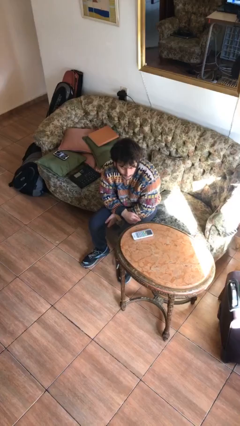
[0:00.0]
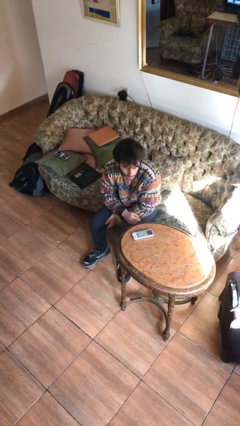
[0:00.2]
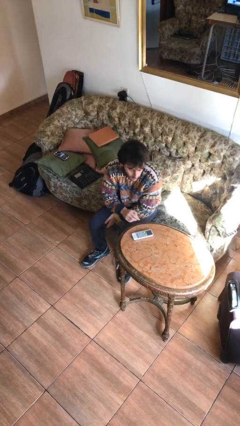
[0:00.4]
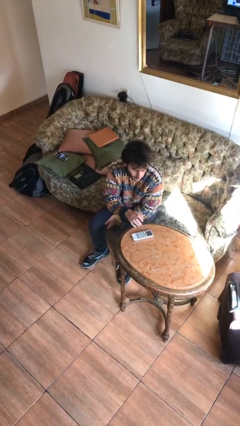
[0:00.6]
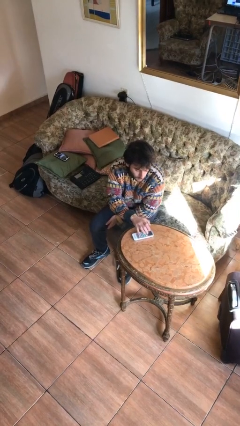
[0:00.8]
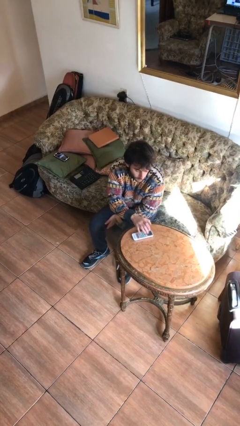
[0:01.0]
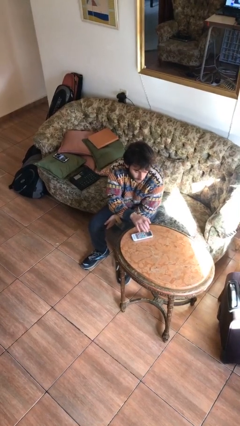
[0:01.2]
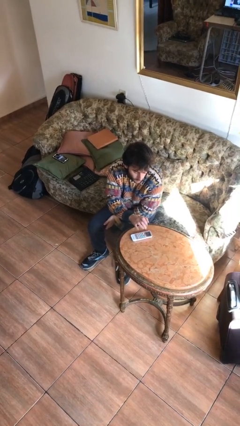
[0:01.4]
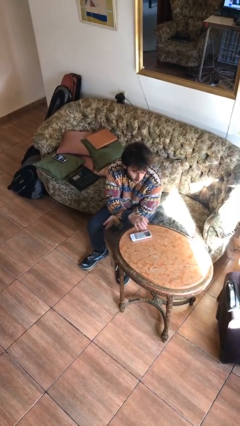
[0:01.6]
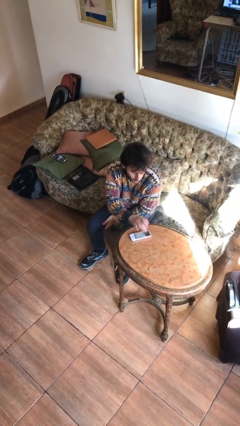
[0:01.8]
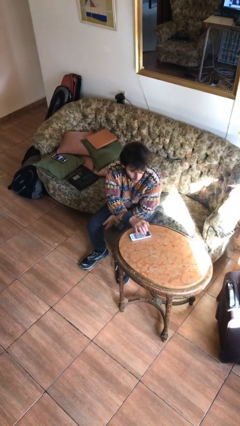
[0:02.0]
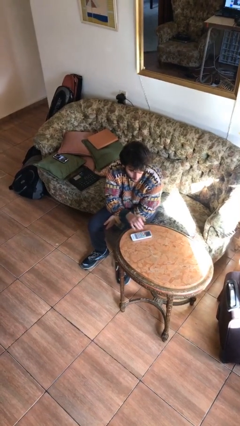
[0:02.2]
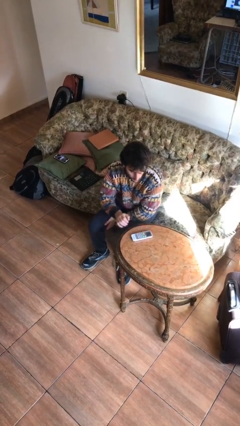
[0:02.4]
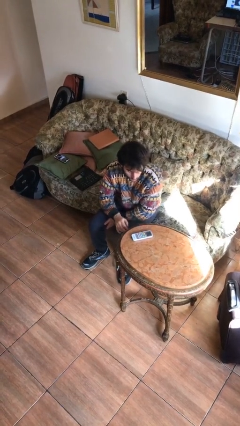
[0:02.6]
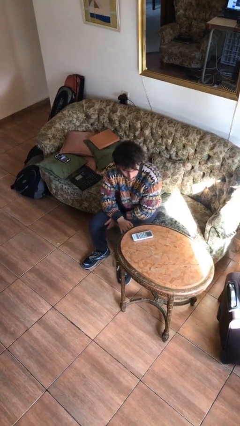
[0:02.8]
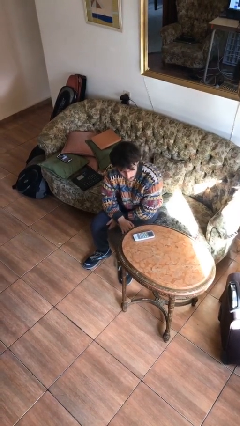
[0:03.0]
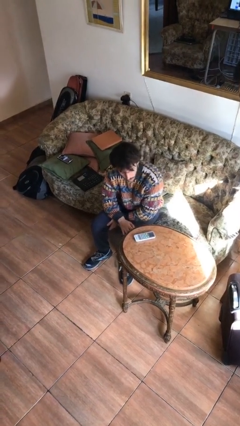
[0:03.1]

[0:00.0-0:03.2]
person taps object with finger

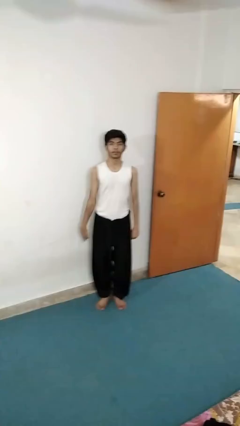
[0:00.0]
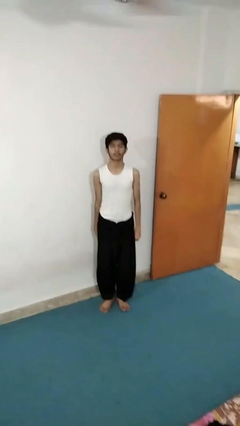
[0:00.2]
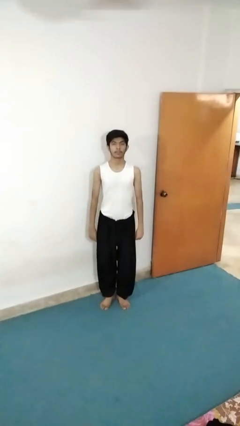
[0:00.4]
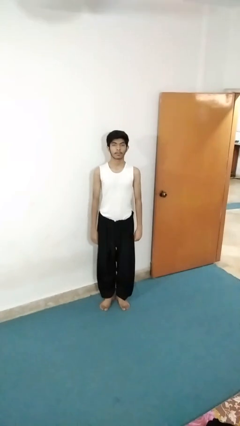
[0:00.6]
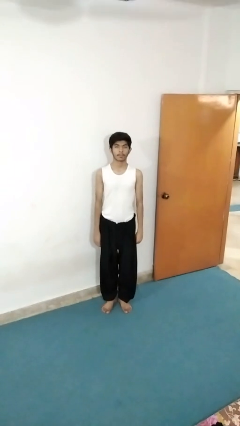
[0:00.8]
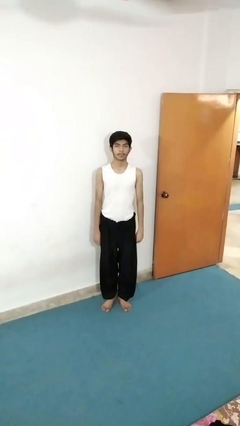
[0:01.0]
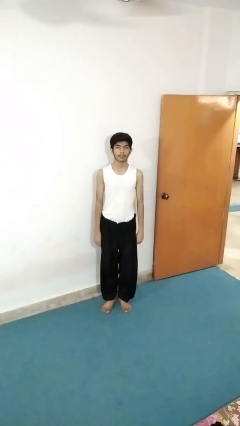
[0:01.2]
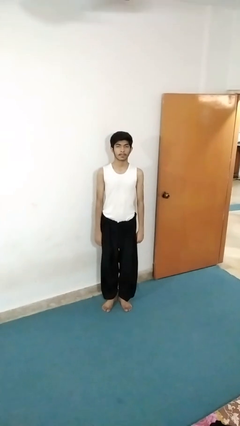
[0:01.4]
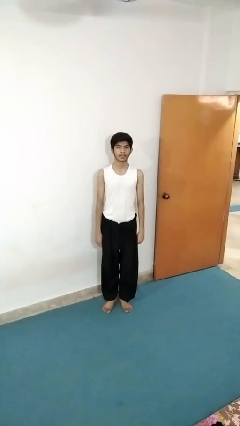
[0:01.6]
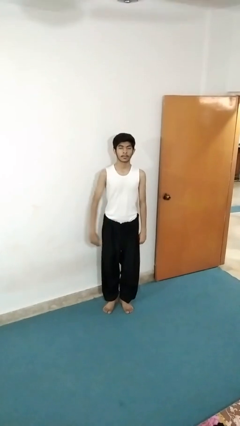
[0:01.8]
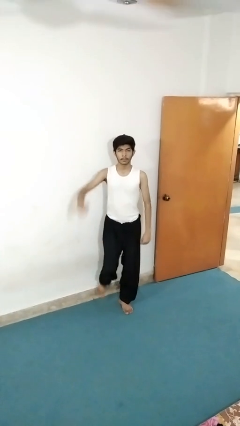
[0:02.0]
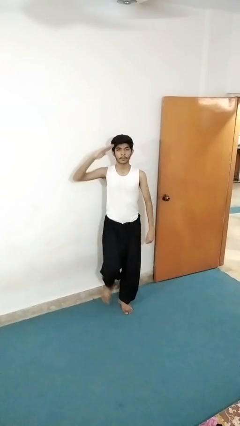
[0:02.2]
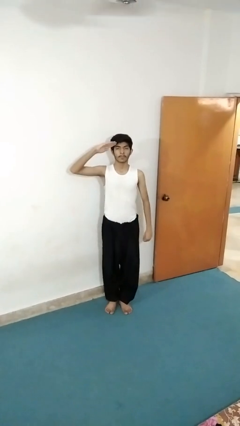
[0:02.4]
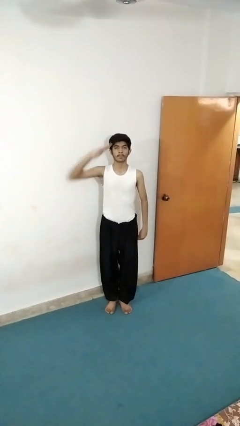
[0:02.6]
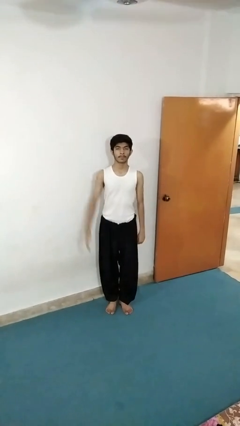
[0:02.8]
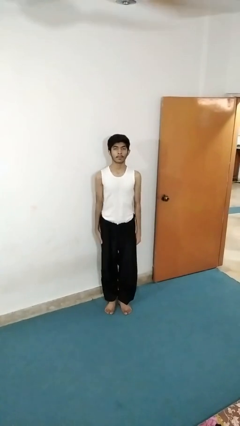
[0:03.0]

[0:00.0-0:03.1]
person salutes

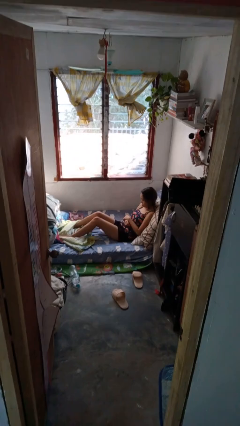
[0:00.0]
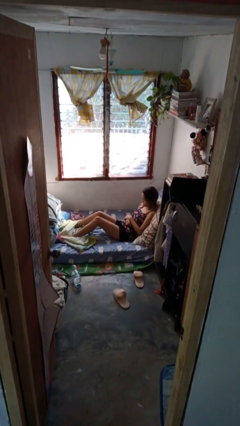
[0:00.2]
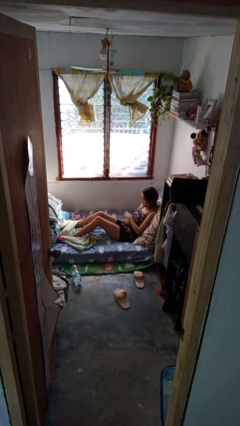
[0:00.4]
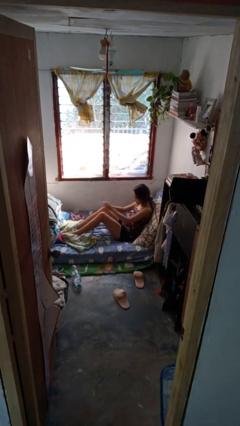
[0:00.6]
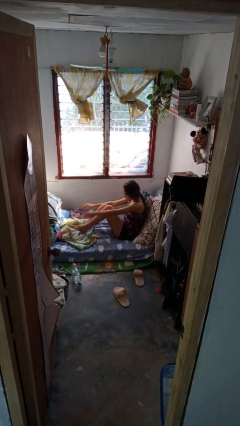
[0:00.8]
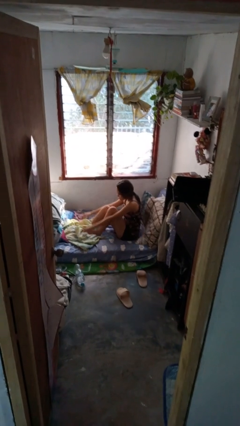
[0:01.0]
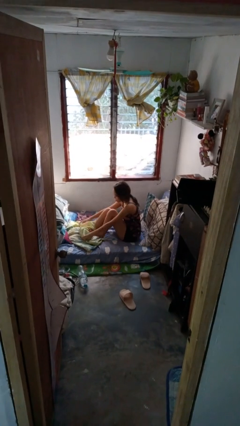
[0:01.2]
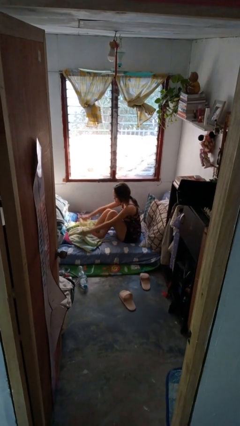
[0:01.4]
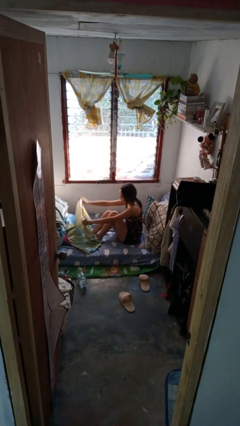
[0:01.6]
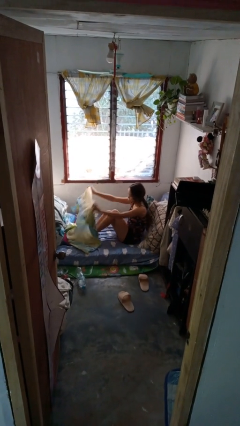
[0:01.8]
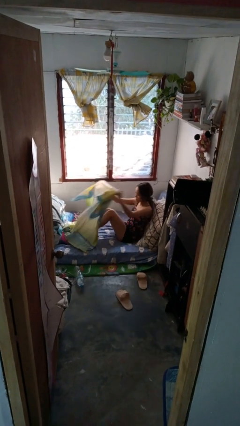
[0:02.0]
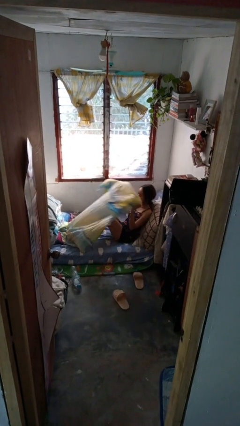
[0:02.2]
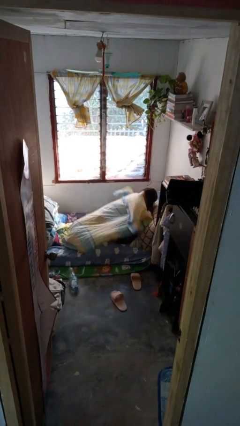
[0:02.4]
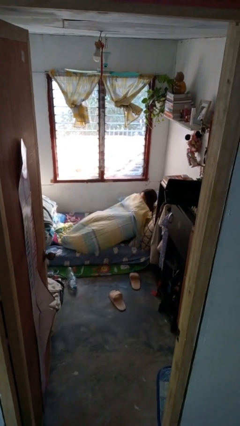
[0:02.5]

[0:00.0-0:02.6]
person covers with bedsheets

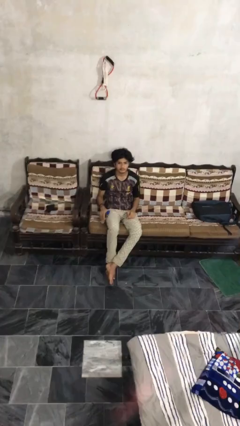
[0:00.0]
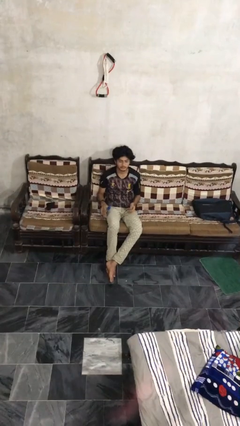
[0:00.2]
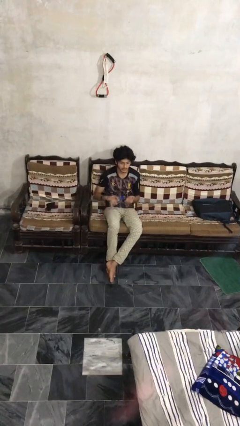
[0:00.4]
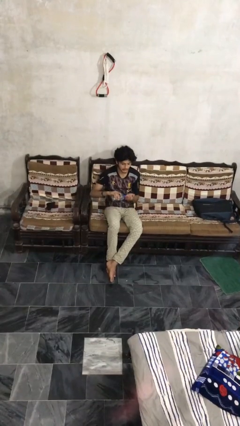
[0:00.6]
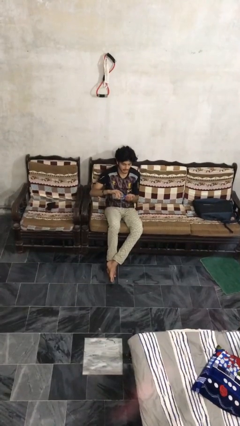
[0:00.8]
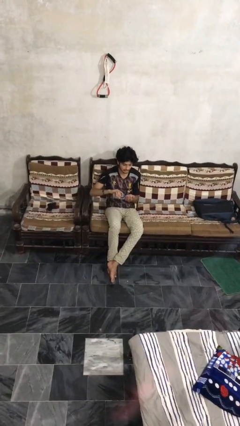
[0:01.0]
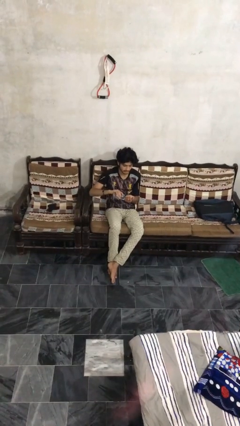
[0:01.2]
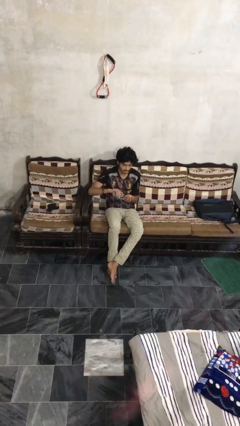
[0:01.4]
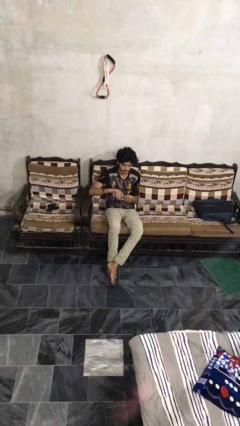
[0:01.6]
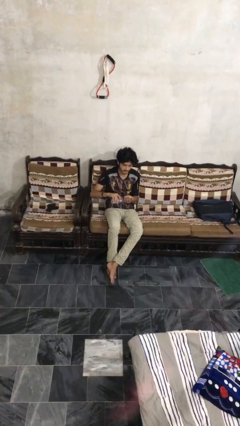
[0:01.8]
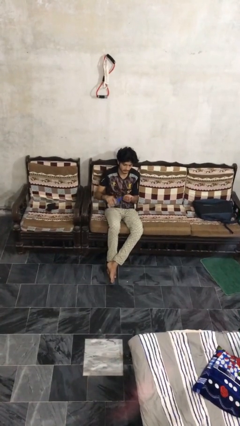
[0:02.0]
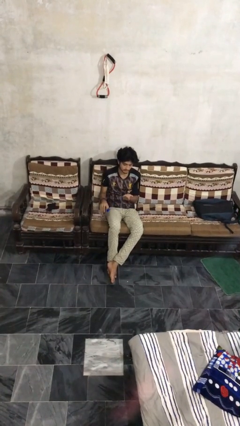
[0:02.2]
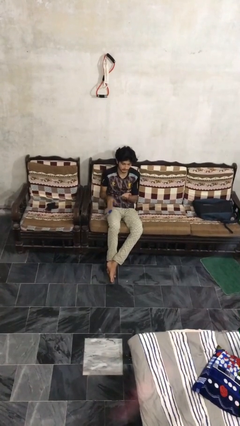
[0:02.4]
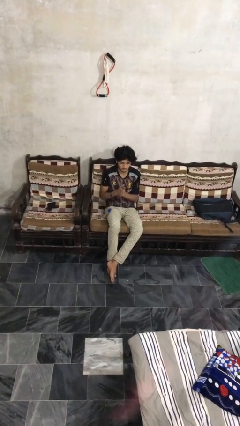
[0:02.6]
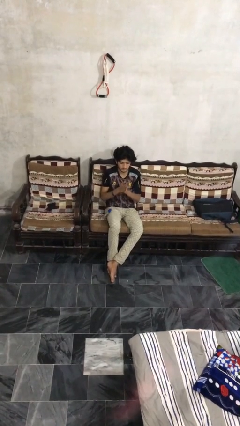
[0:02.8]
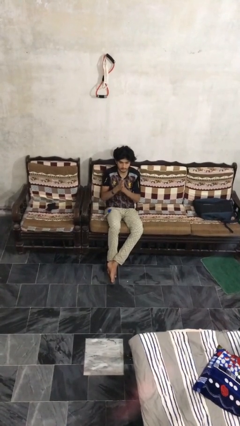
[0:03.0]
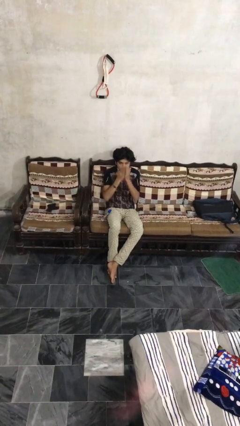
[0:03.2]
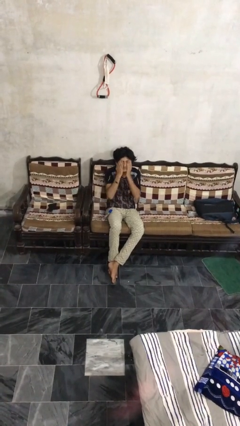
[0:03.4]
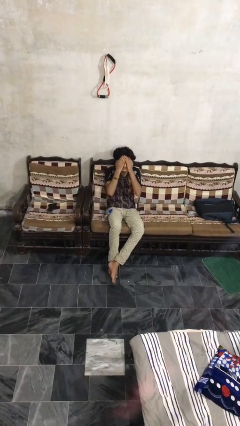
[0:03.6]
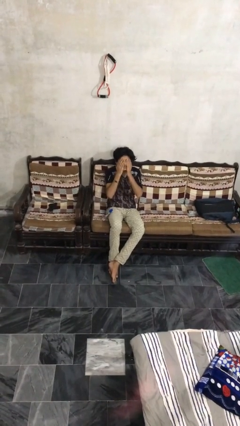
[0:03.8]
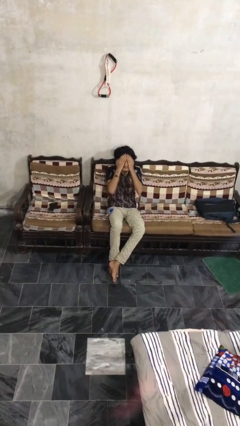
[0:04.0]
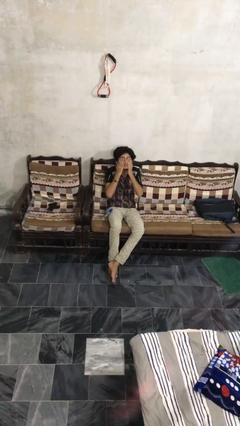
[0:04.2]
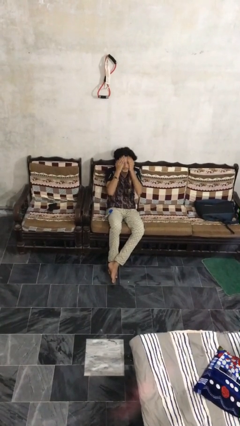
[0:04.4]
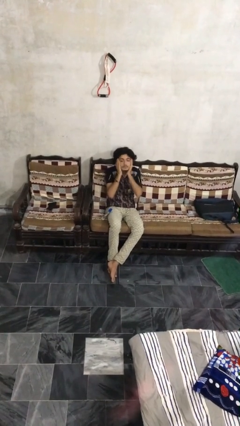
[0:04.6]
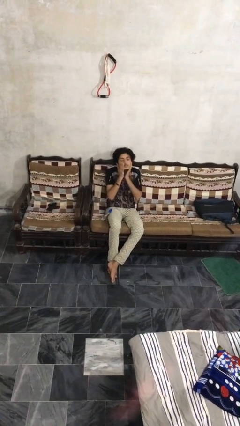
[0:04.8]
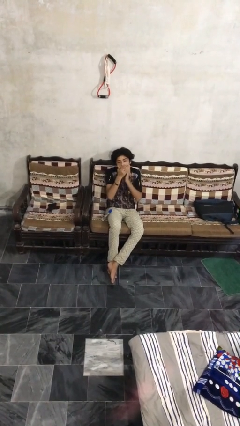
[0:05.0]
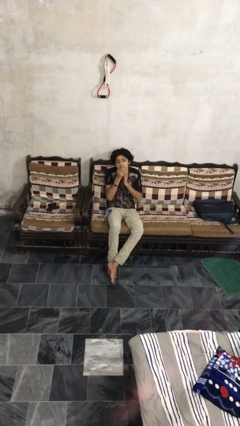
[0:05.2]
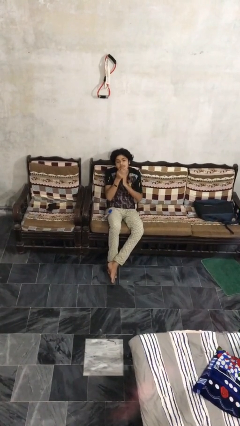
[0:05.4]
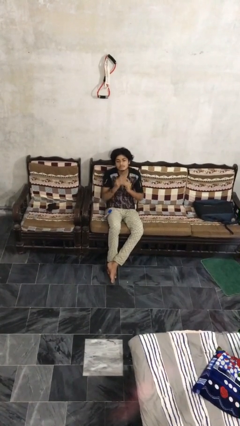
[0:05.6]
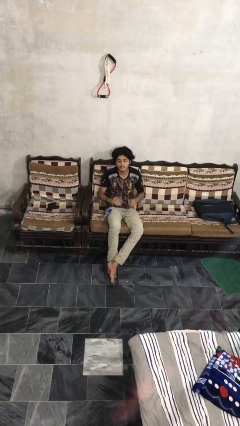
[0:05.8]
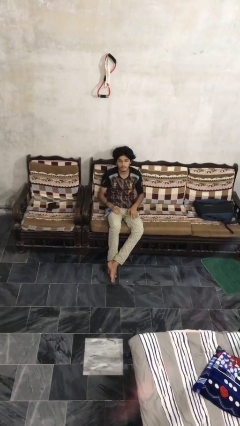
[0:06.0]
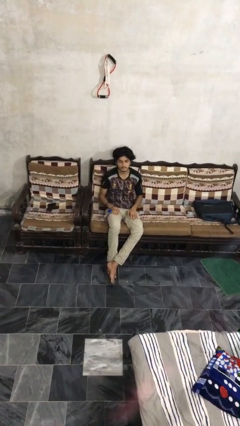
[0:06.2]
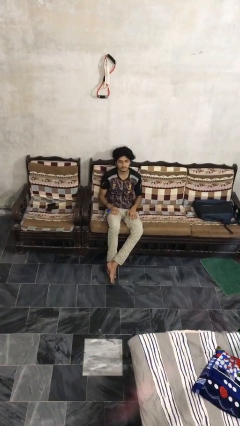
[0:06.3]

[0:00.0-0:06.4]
person applies facial moisturizer

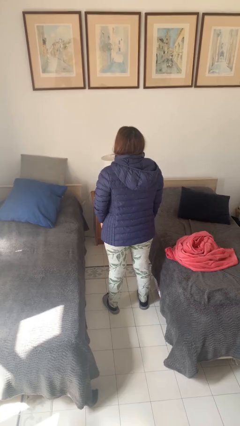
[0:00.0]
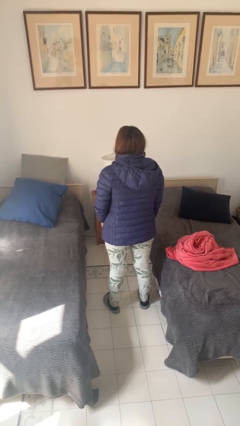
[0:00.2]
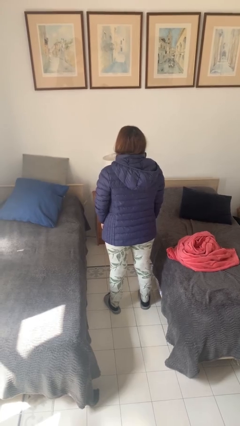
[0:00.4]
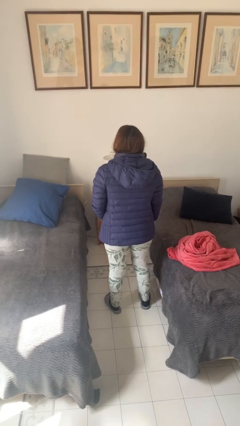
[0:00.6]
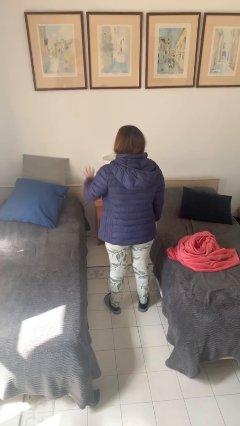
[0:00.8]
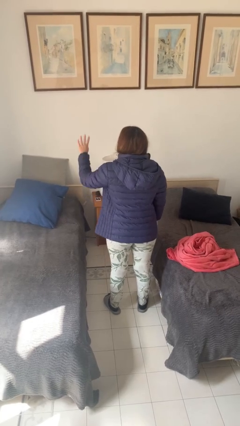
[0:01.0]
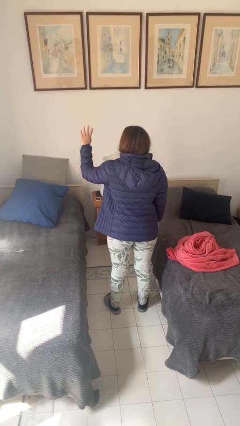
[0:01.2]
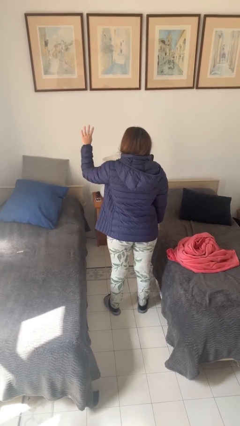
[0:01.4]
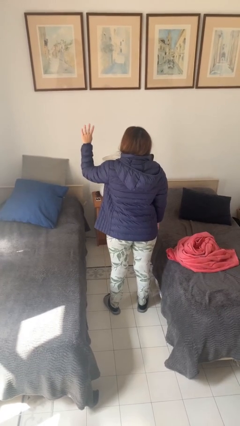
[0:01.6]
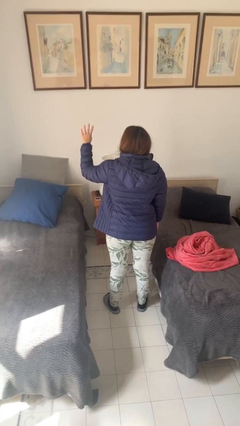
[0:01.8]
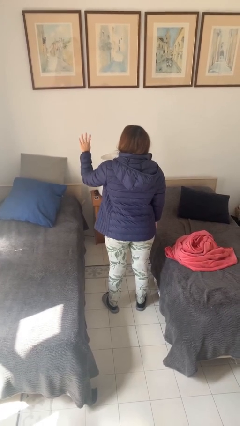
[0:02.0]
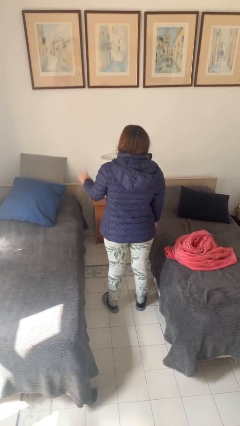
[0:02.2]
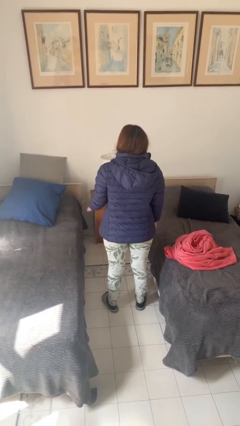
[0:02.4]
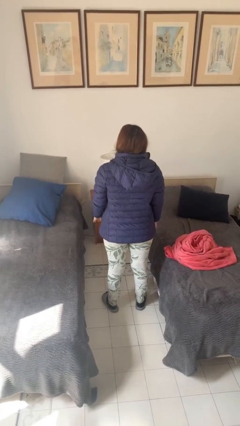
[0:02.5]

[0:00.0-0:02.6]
person gestures number four

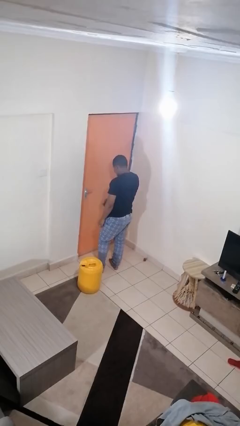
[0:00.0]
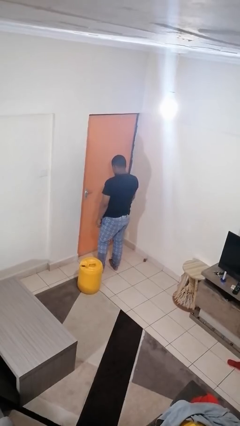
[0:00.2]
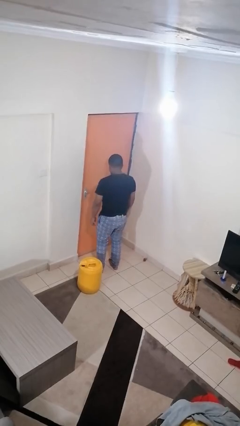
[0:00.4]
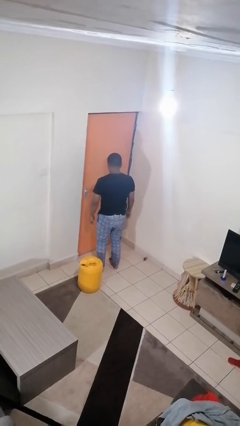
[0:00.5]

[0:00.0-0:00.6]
person sneezes into arm
